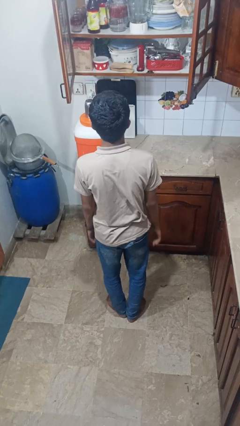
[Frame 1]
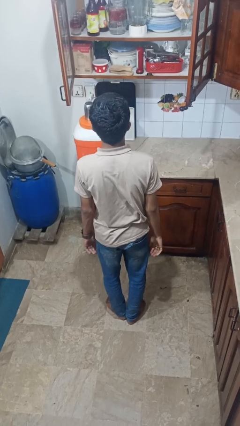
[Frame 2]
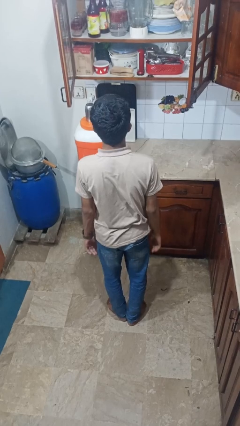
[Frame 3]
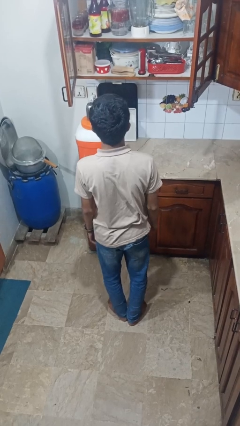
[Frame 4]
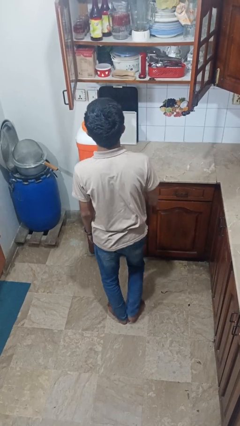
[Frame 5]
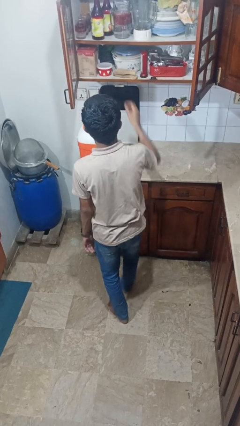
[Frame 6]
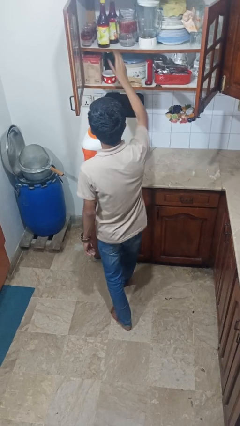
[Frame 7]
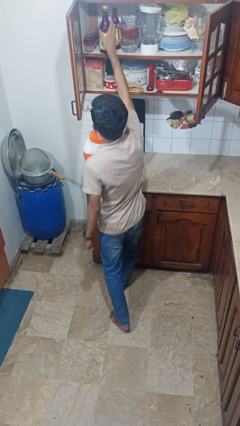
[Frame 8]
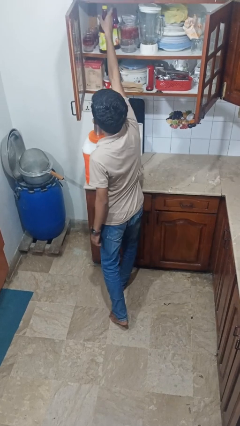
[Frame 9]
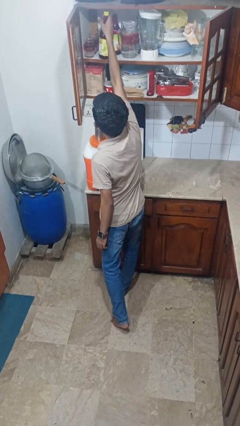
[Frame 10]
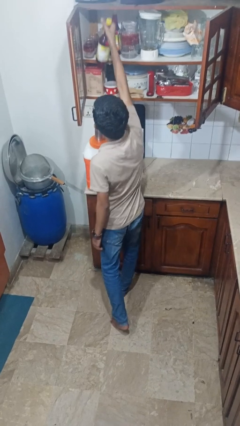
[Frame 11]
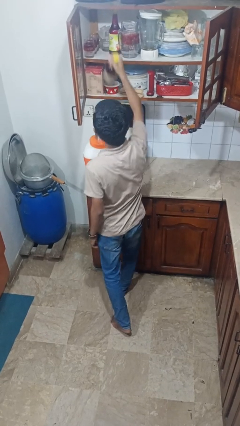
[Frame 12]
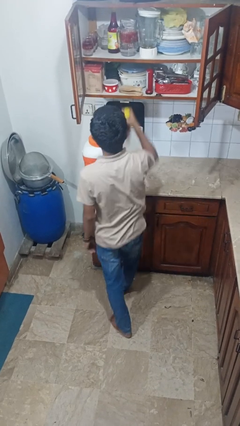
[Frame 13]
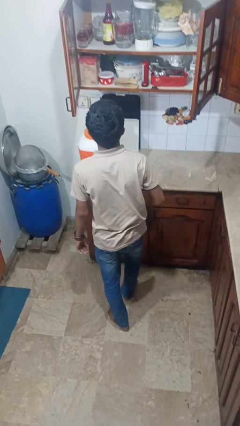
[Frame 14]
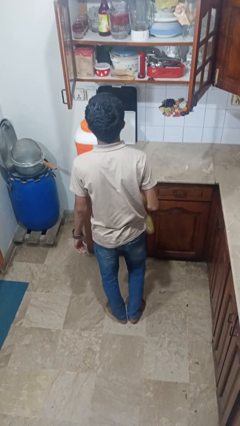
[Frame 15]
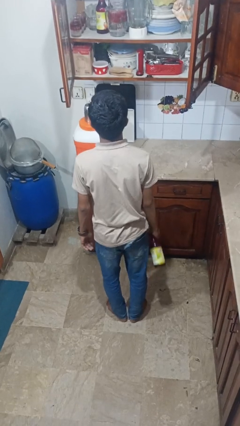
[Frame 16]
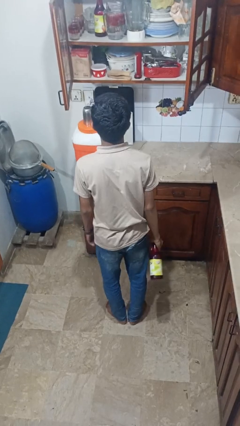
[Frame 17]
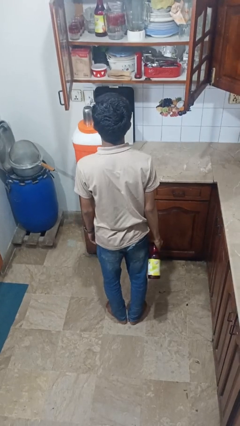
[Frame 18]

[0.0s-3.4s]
person picks up object from cabinet

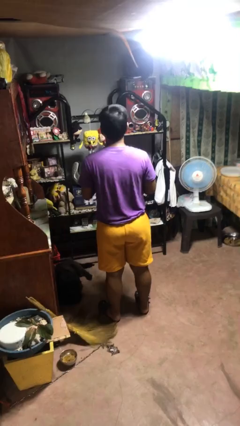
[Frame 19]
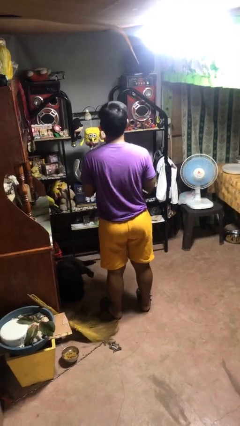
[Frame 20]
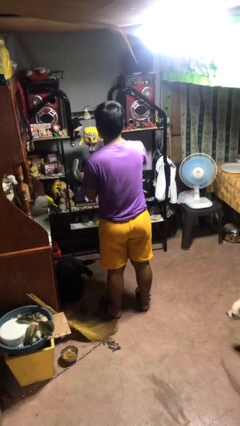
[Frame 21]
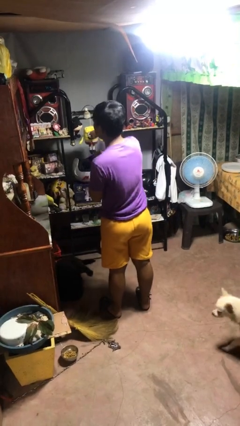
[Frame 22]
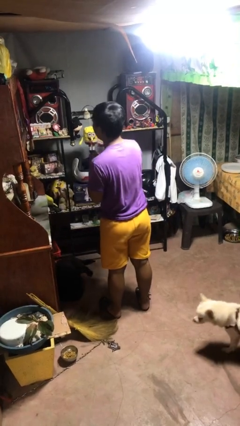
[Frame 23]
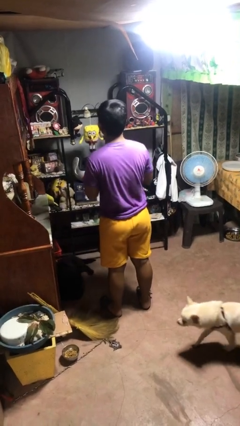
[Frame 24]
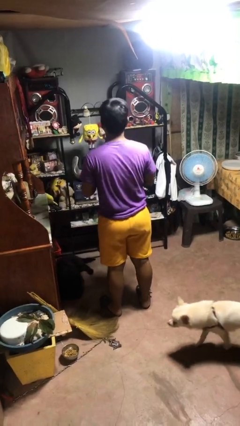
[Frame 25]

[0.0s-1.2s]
person punches

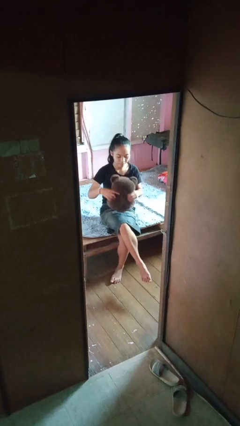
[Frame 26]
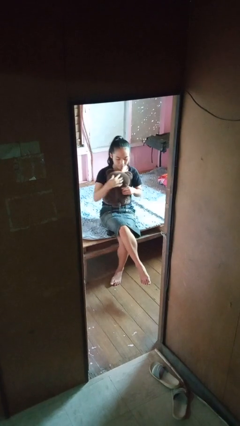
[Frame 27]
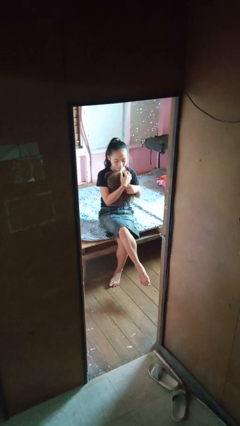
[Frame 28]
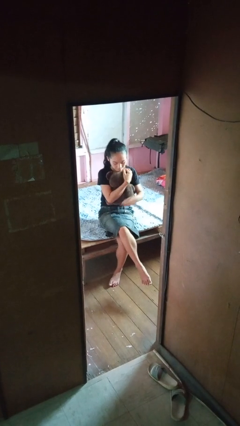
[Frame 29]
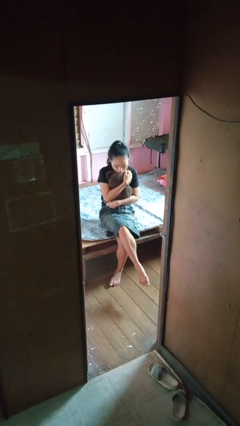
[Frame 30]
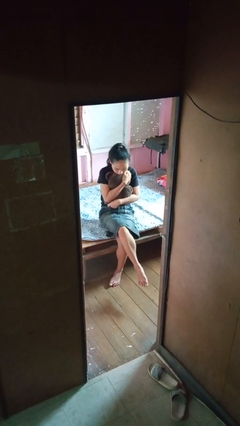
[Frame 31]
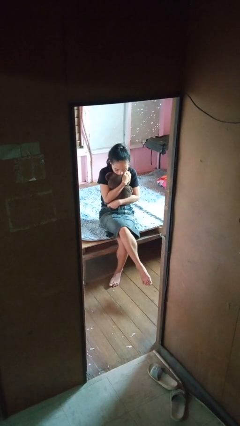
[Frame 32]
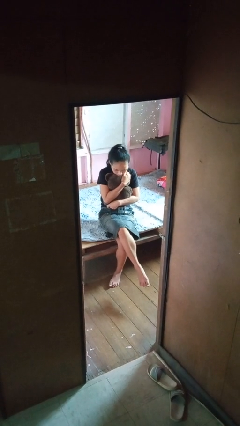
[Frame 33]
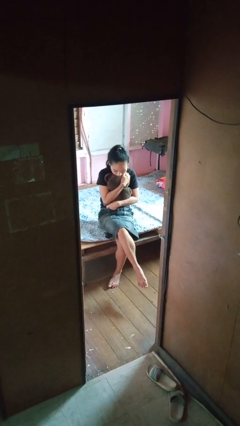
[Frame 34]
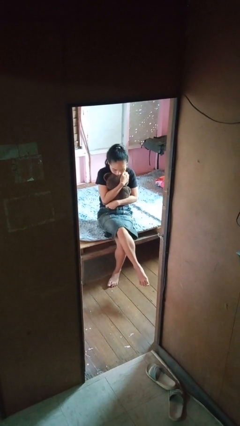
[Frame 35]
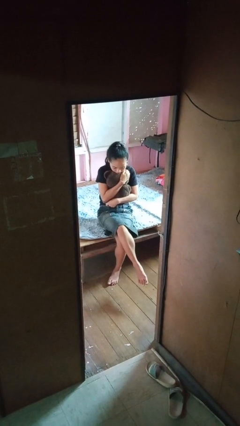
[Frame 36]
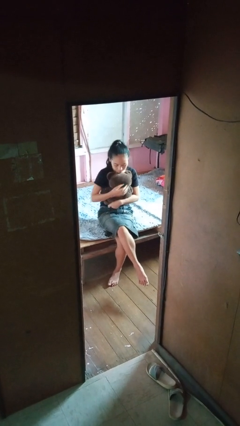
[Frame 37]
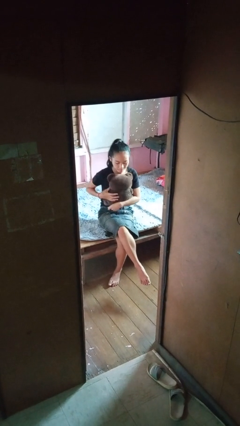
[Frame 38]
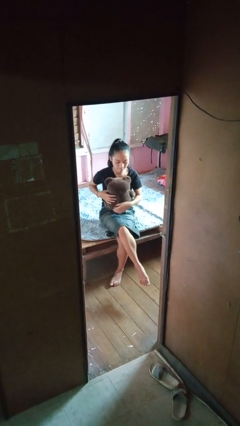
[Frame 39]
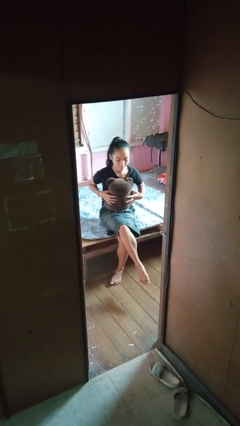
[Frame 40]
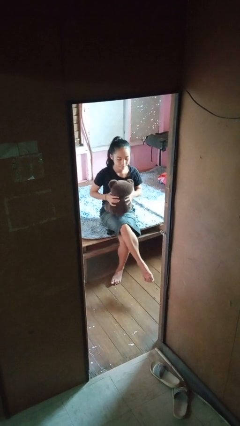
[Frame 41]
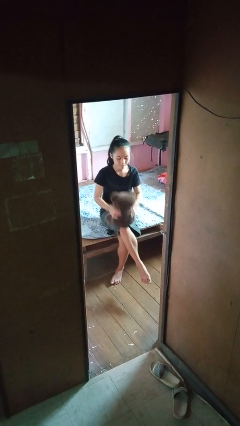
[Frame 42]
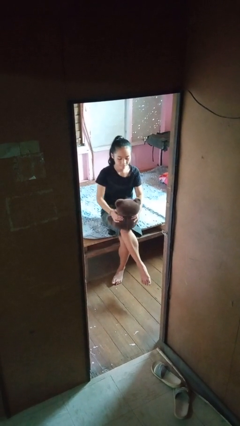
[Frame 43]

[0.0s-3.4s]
person hugs stuffed animal

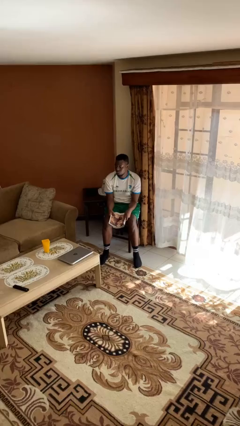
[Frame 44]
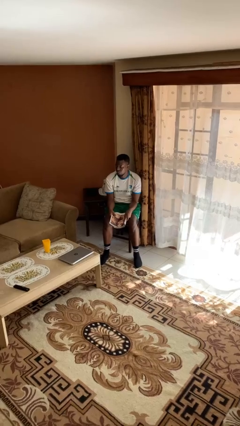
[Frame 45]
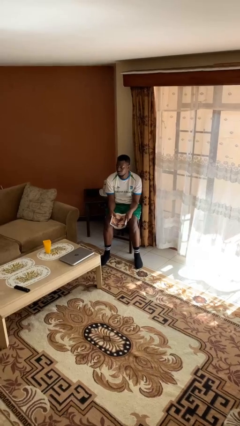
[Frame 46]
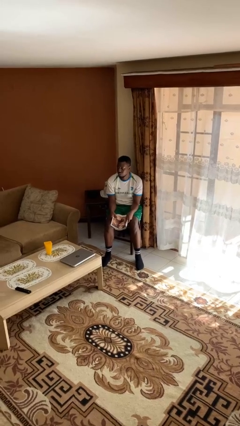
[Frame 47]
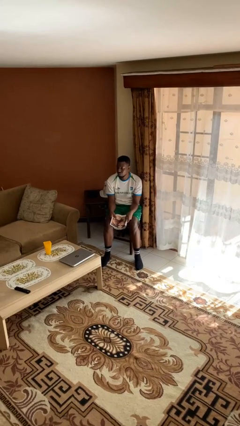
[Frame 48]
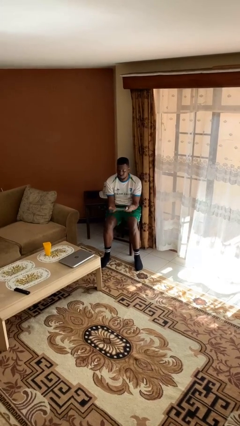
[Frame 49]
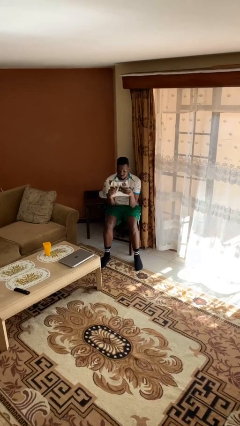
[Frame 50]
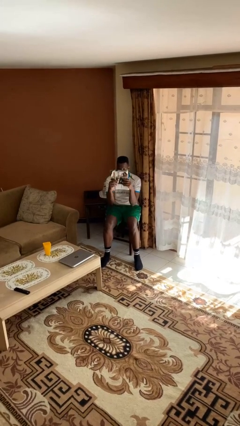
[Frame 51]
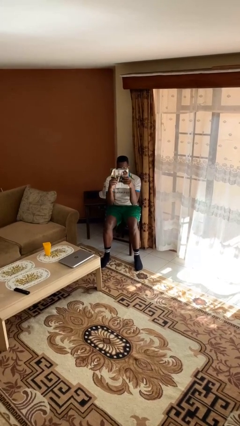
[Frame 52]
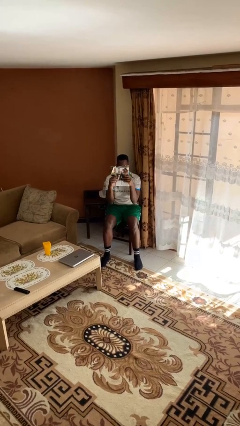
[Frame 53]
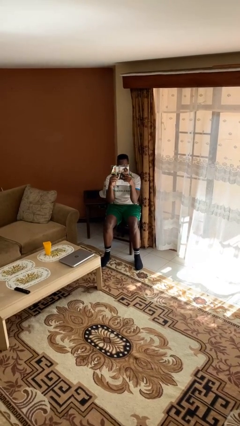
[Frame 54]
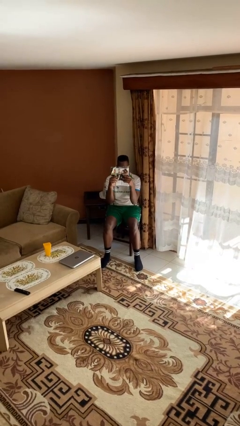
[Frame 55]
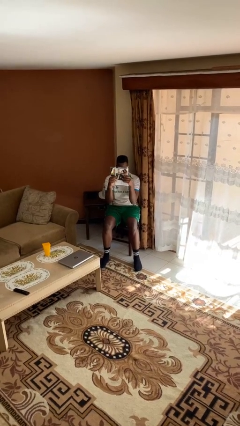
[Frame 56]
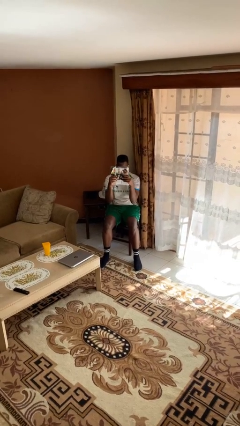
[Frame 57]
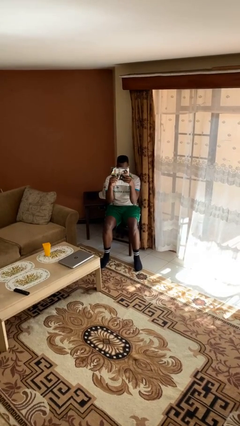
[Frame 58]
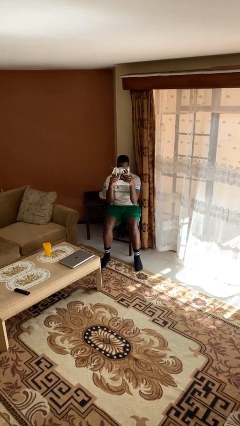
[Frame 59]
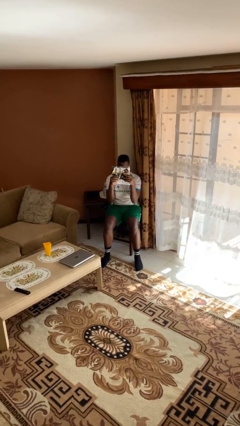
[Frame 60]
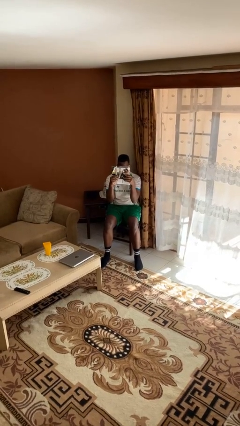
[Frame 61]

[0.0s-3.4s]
person reads document

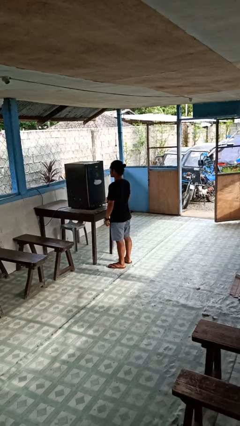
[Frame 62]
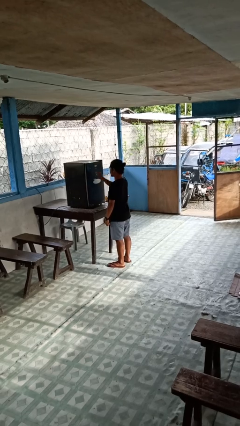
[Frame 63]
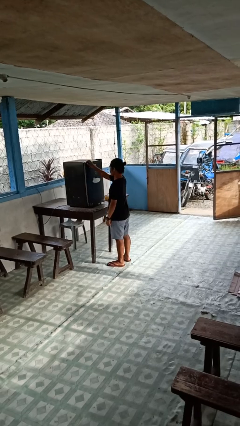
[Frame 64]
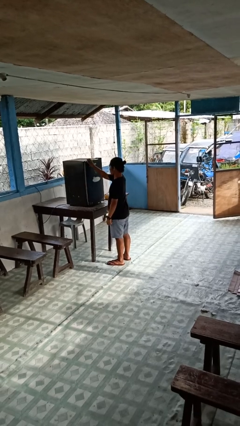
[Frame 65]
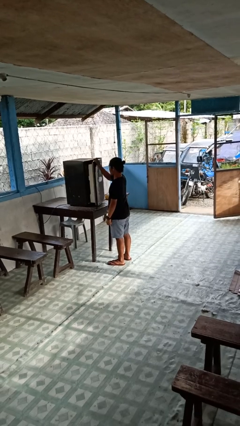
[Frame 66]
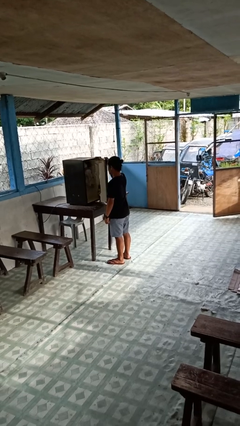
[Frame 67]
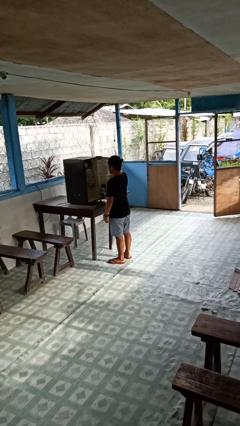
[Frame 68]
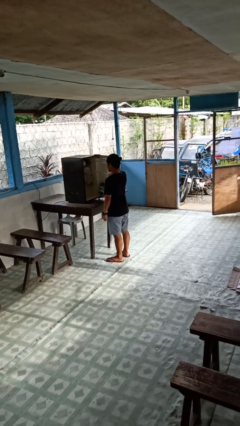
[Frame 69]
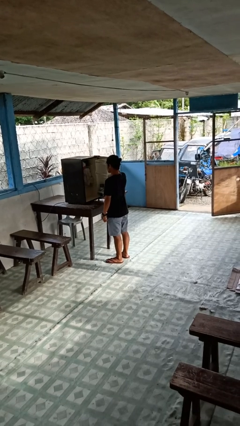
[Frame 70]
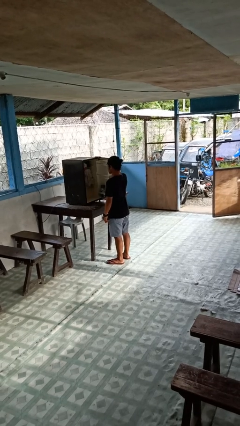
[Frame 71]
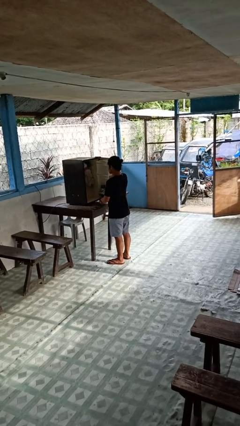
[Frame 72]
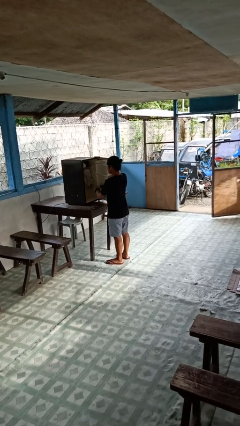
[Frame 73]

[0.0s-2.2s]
person opens refrigerator

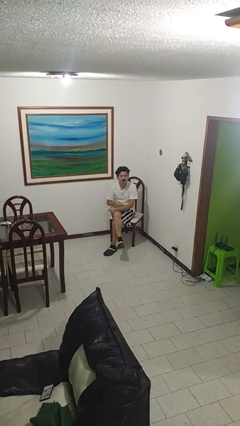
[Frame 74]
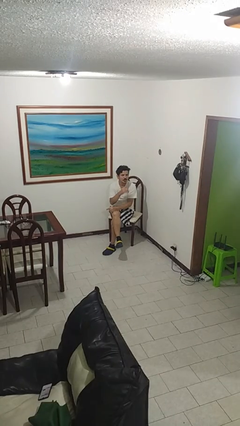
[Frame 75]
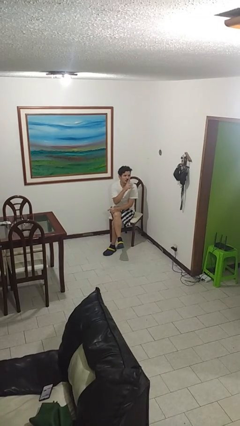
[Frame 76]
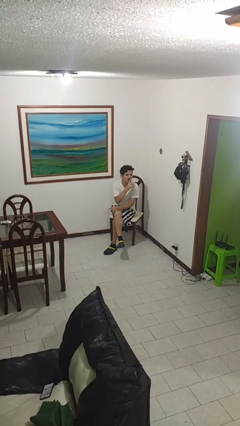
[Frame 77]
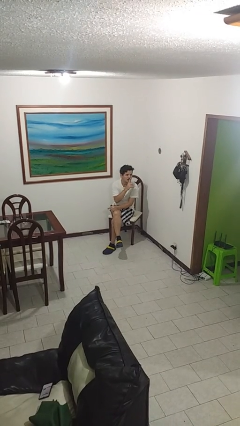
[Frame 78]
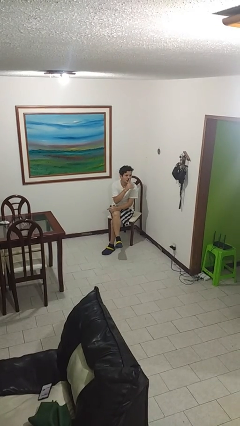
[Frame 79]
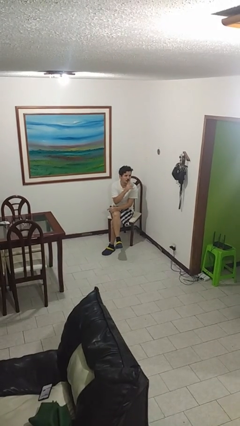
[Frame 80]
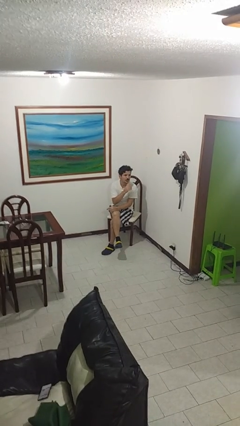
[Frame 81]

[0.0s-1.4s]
person gestures be quiet

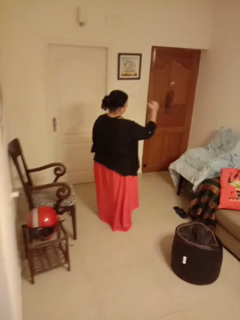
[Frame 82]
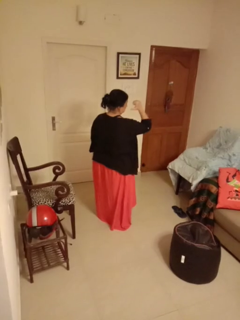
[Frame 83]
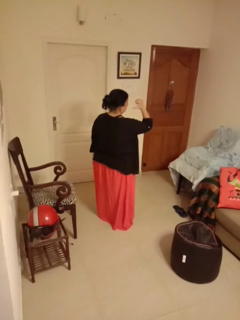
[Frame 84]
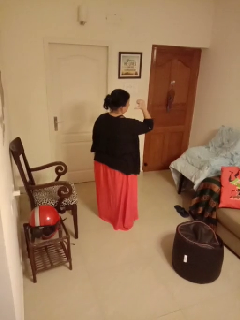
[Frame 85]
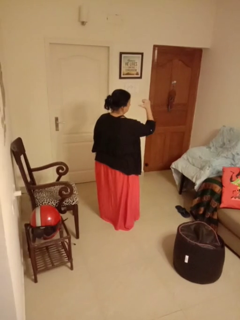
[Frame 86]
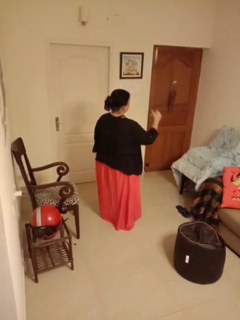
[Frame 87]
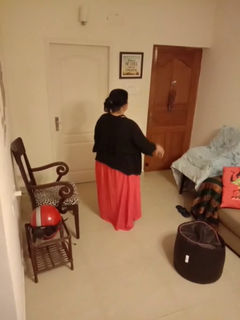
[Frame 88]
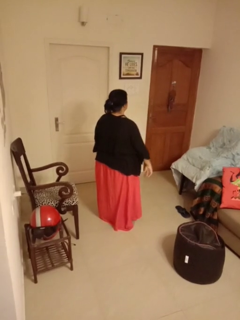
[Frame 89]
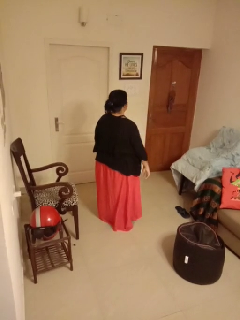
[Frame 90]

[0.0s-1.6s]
person gestures behind me

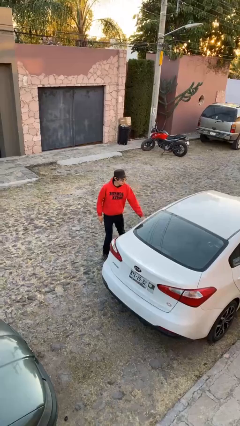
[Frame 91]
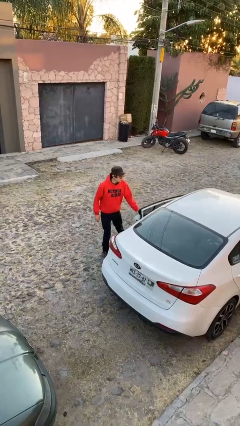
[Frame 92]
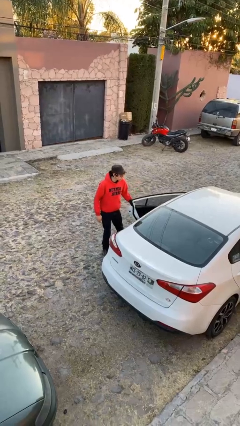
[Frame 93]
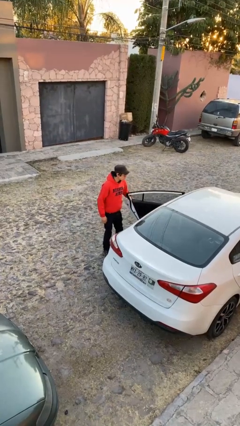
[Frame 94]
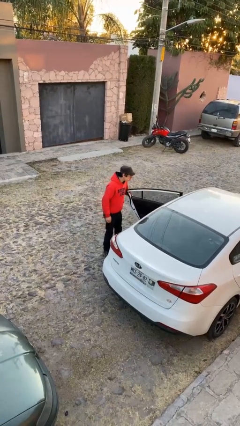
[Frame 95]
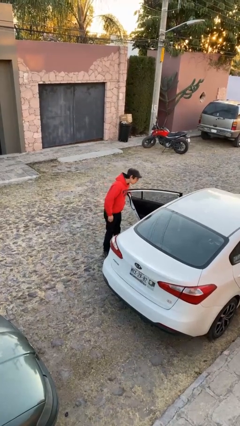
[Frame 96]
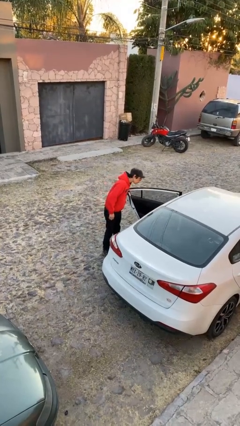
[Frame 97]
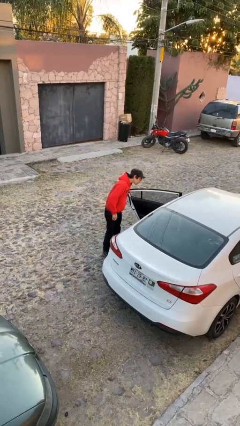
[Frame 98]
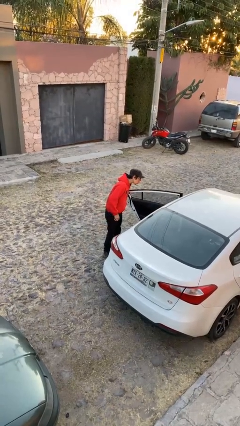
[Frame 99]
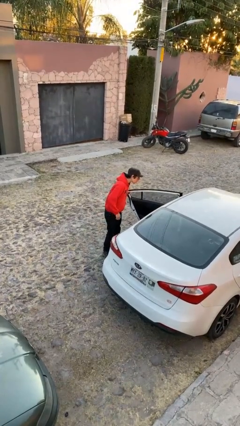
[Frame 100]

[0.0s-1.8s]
person opens car door
